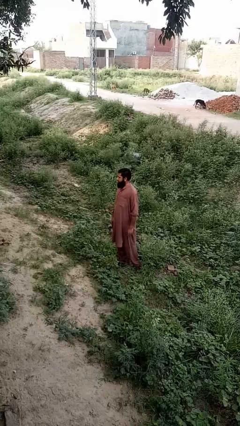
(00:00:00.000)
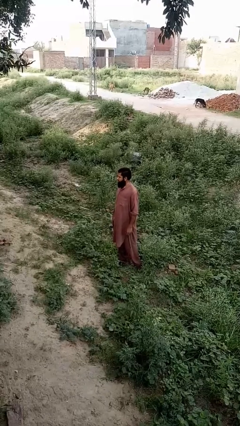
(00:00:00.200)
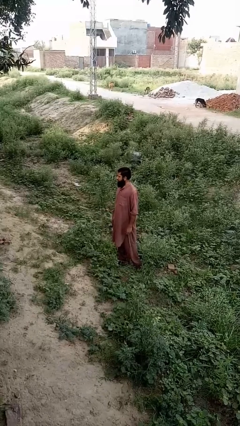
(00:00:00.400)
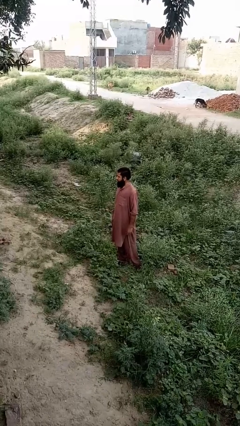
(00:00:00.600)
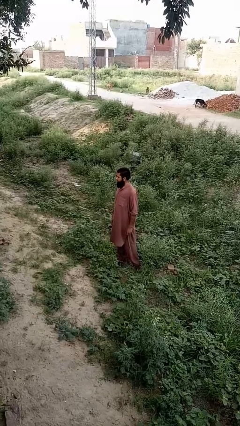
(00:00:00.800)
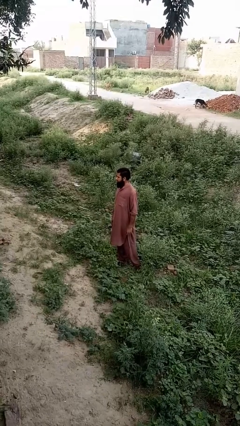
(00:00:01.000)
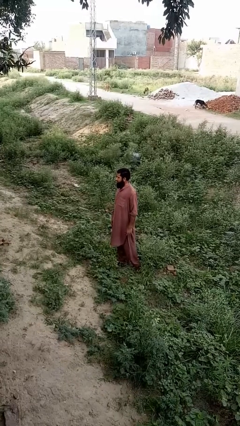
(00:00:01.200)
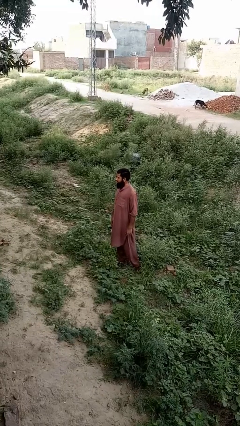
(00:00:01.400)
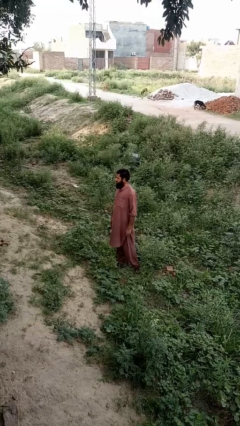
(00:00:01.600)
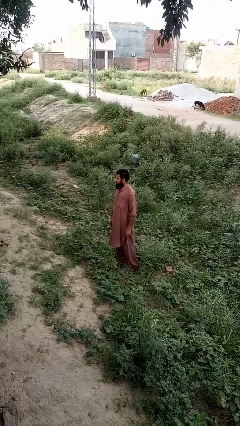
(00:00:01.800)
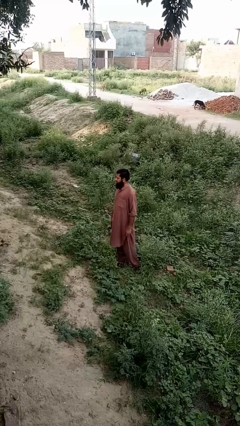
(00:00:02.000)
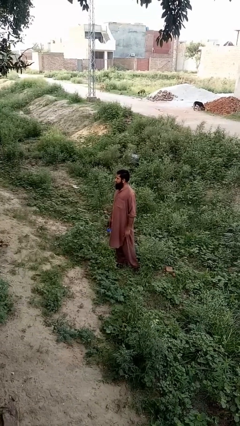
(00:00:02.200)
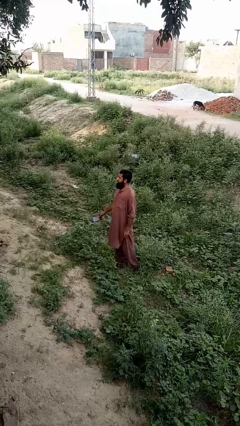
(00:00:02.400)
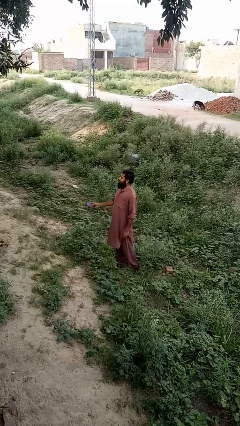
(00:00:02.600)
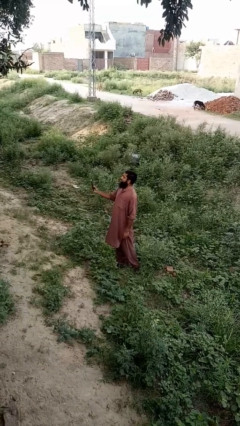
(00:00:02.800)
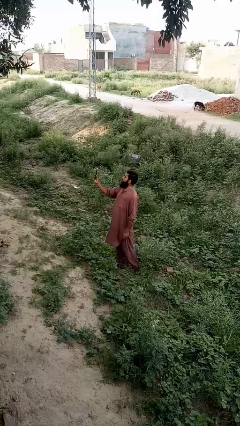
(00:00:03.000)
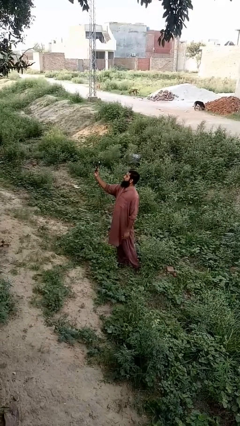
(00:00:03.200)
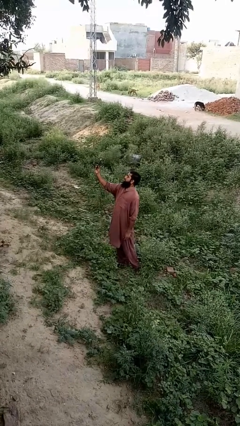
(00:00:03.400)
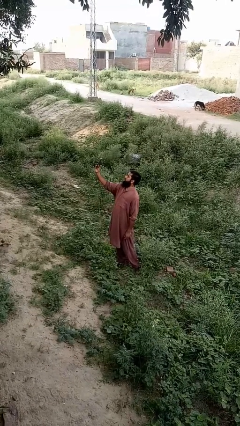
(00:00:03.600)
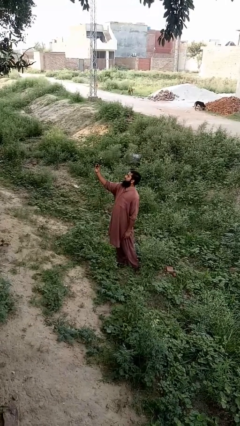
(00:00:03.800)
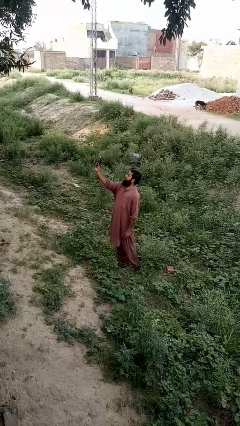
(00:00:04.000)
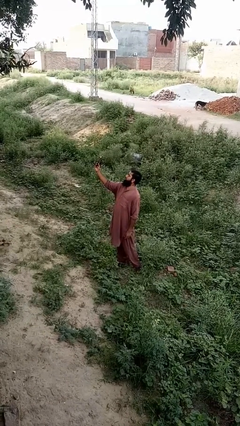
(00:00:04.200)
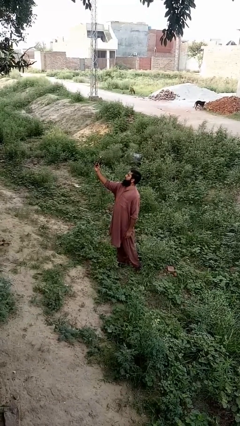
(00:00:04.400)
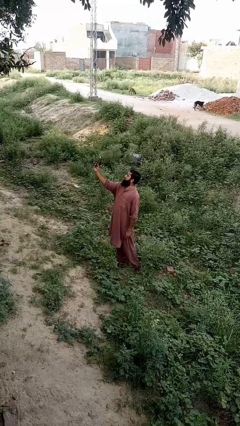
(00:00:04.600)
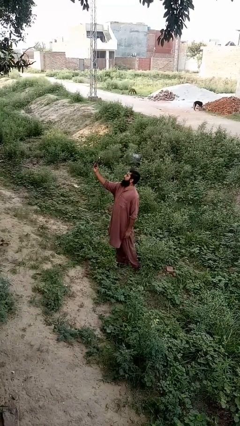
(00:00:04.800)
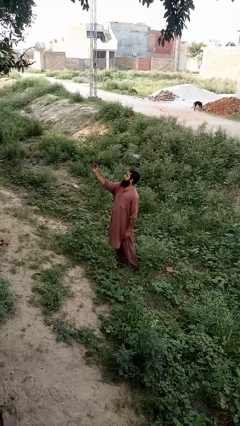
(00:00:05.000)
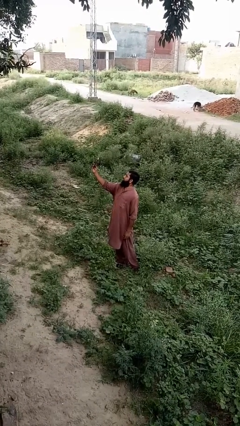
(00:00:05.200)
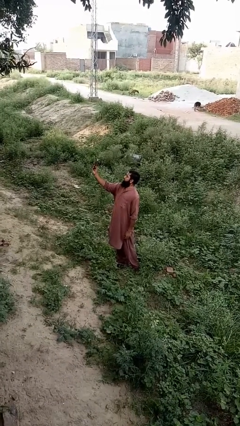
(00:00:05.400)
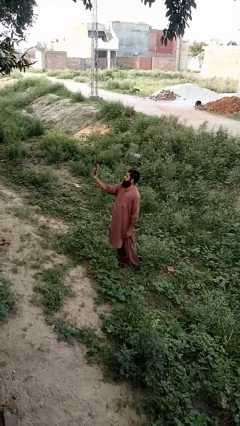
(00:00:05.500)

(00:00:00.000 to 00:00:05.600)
person takes selfie

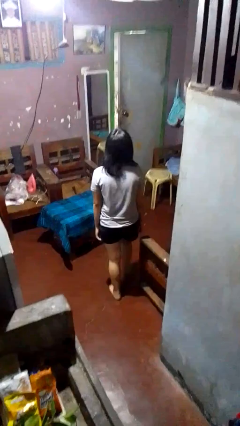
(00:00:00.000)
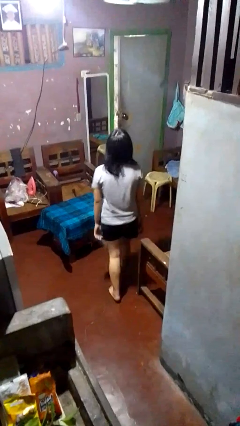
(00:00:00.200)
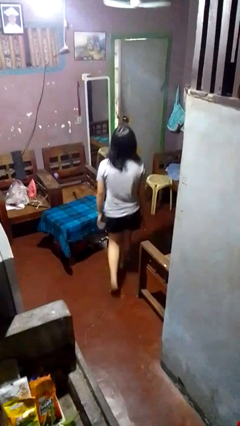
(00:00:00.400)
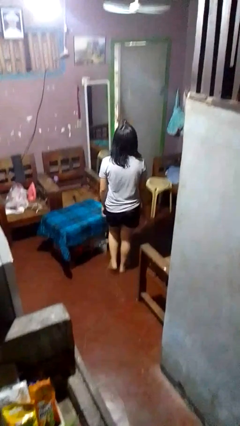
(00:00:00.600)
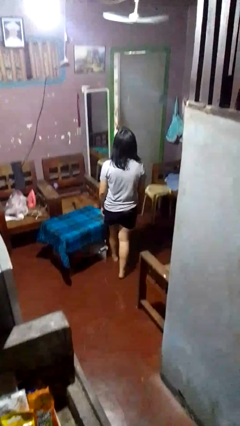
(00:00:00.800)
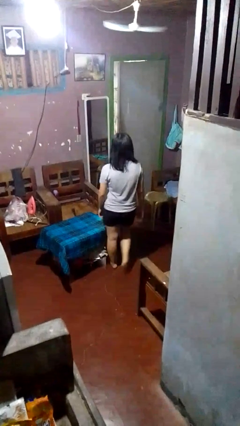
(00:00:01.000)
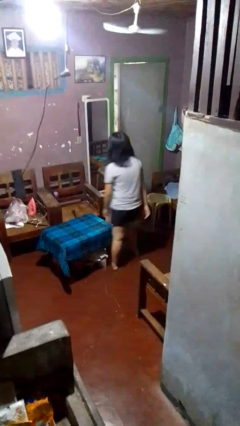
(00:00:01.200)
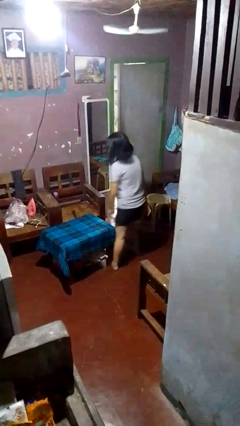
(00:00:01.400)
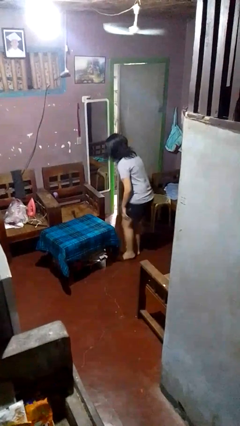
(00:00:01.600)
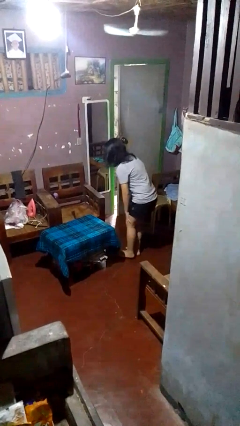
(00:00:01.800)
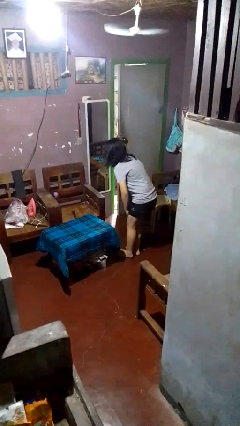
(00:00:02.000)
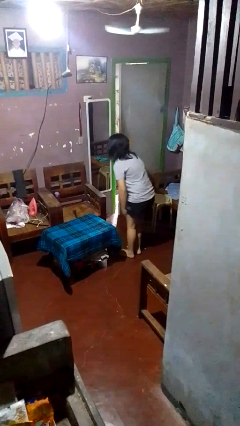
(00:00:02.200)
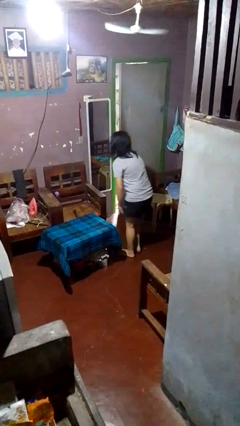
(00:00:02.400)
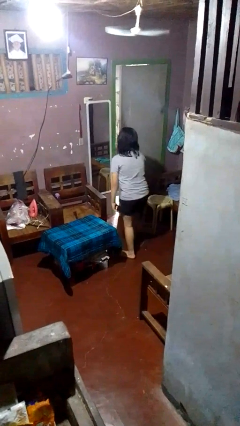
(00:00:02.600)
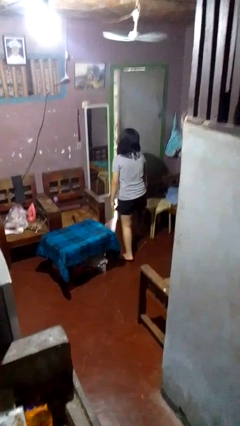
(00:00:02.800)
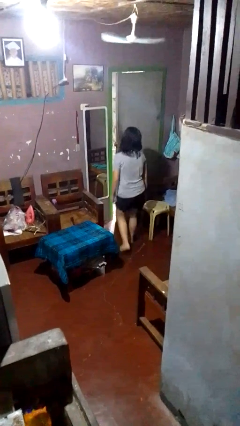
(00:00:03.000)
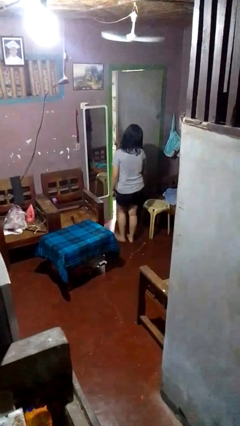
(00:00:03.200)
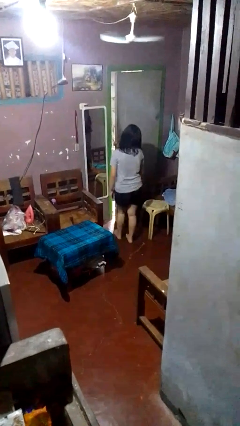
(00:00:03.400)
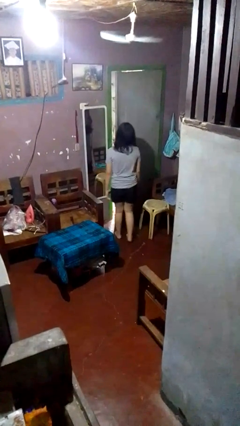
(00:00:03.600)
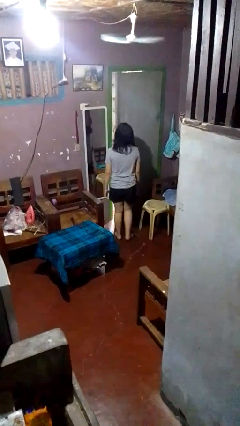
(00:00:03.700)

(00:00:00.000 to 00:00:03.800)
person bumps into table

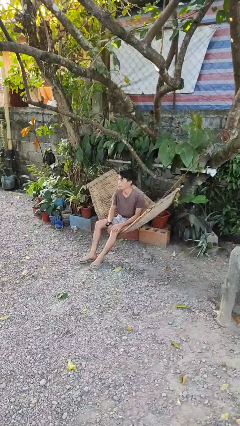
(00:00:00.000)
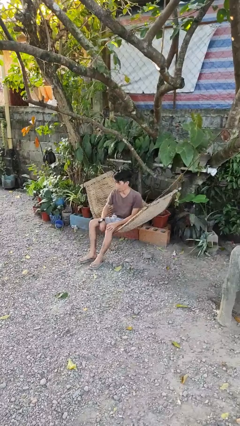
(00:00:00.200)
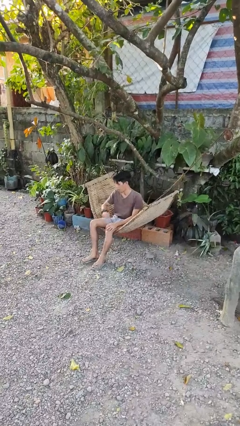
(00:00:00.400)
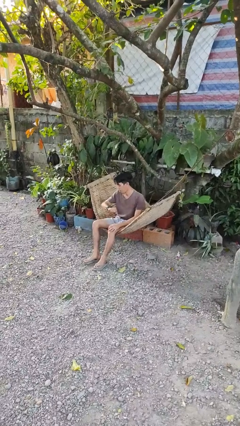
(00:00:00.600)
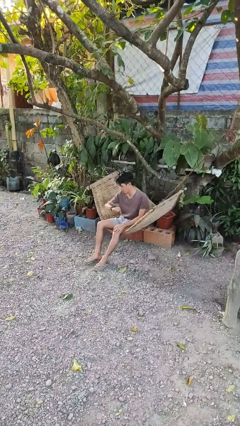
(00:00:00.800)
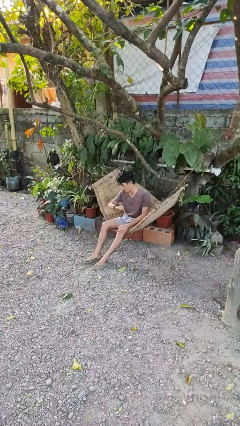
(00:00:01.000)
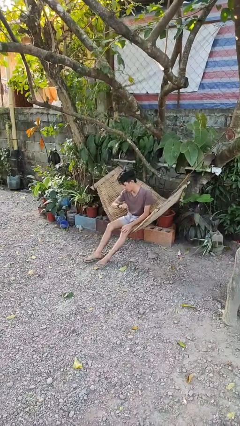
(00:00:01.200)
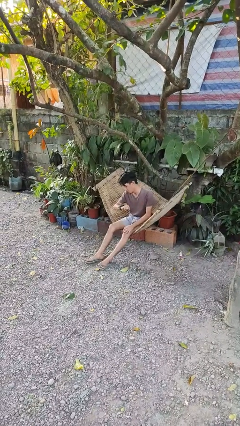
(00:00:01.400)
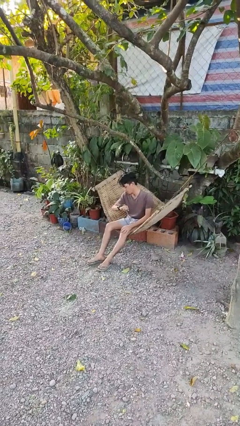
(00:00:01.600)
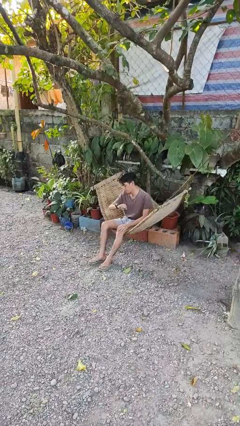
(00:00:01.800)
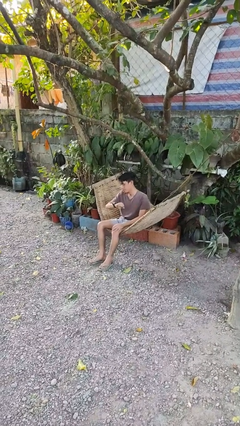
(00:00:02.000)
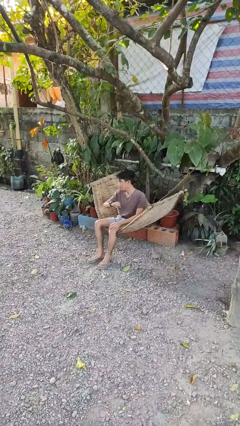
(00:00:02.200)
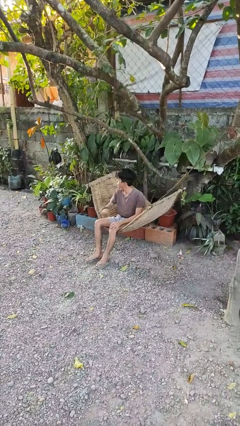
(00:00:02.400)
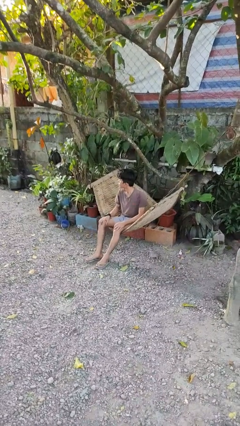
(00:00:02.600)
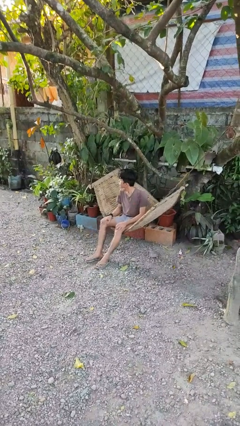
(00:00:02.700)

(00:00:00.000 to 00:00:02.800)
person looks at wristwatch

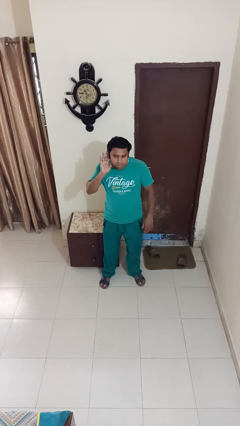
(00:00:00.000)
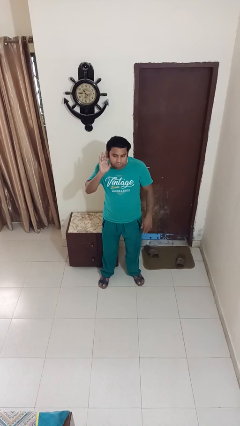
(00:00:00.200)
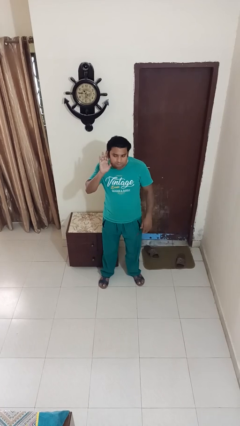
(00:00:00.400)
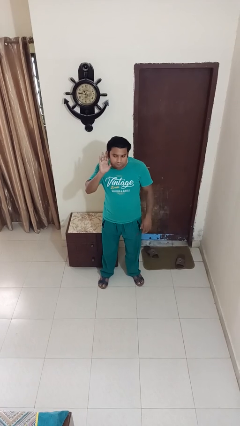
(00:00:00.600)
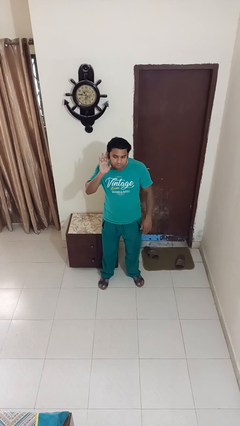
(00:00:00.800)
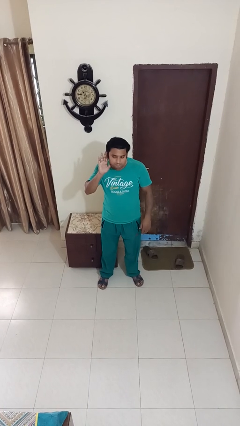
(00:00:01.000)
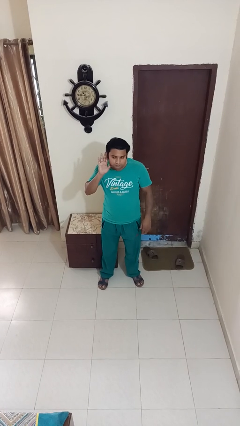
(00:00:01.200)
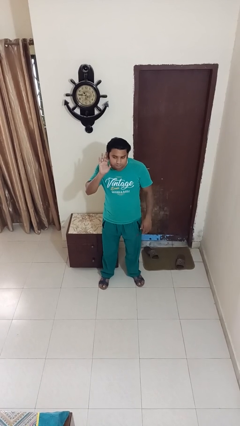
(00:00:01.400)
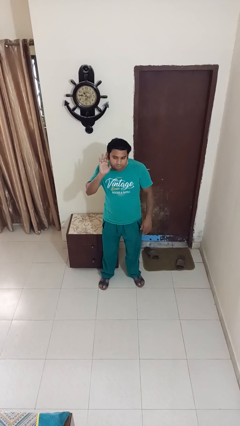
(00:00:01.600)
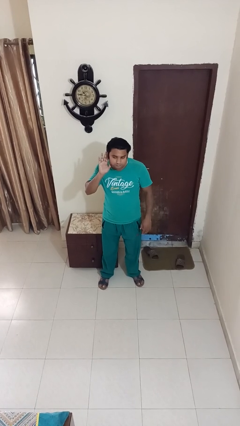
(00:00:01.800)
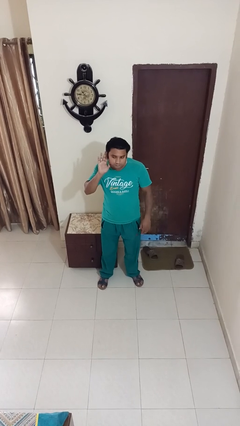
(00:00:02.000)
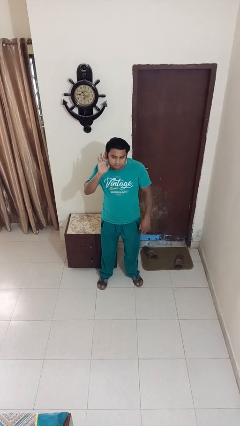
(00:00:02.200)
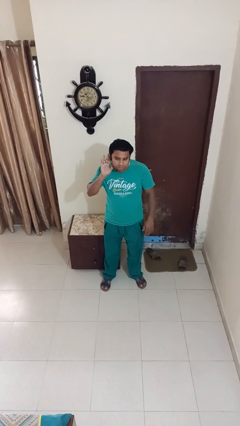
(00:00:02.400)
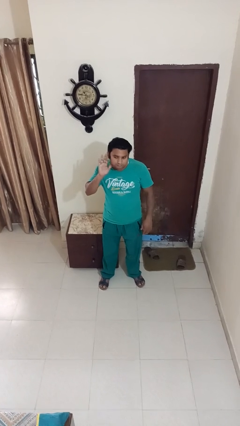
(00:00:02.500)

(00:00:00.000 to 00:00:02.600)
person gestures listen closely

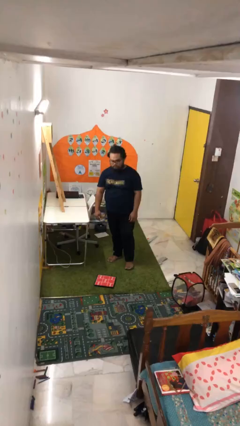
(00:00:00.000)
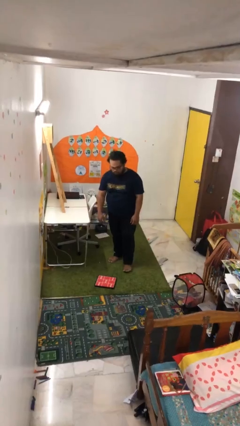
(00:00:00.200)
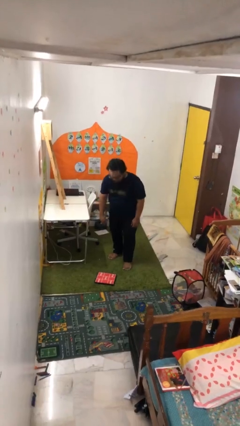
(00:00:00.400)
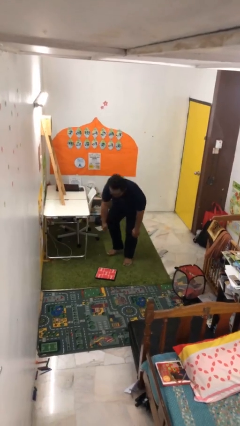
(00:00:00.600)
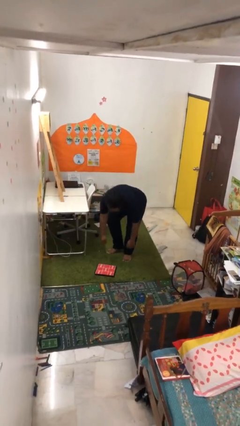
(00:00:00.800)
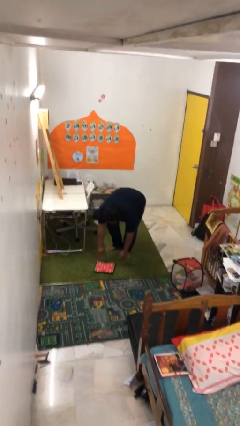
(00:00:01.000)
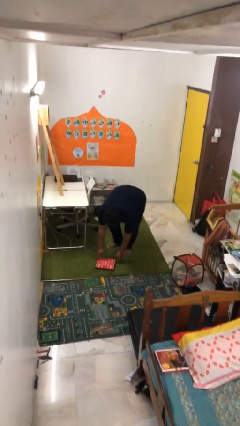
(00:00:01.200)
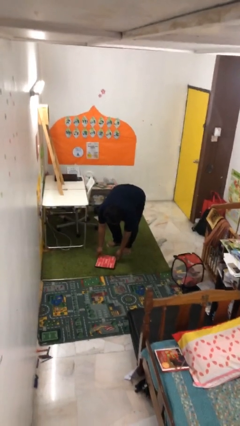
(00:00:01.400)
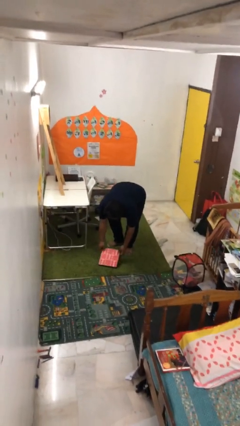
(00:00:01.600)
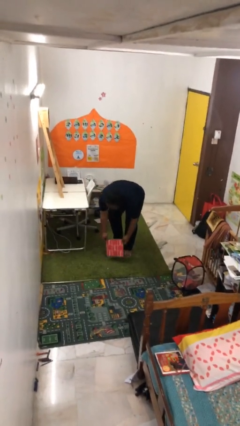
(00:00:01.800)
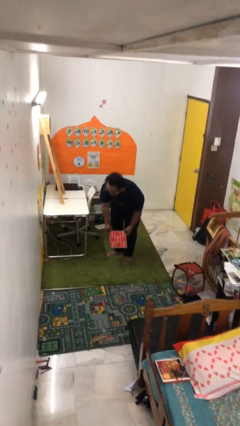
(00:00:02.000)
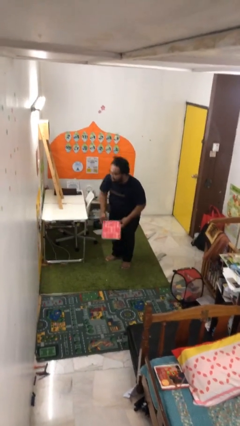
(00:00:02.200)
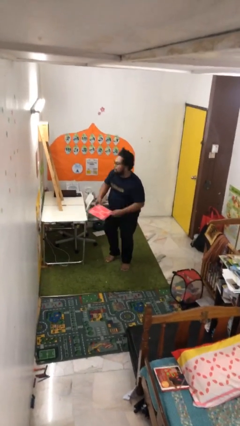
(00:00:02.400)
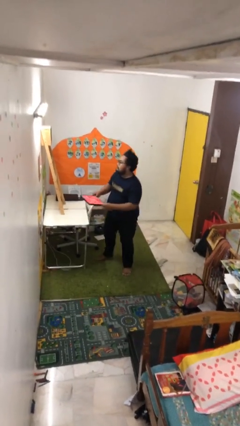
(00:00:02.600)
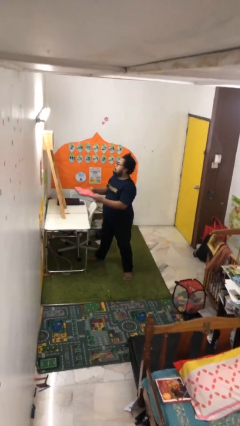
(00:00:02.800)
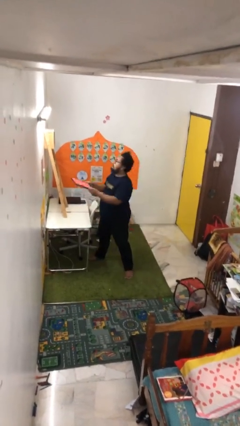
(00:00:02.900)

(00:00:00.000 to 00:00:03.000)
person picks up object from floor
